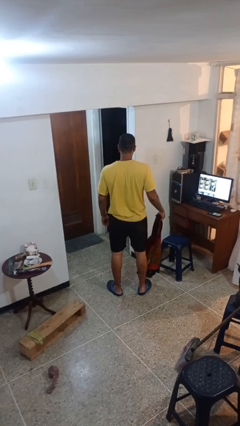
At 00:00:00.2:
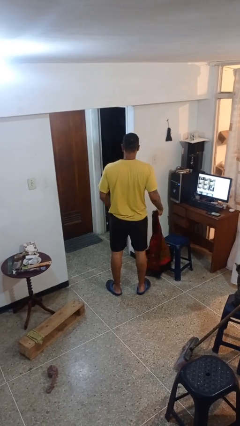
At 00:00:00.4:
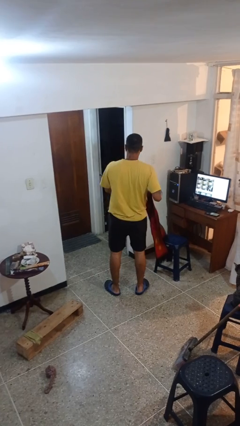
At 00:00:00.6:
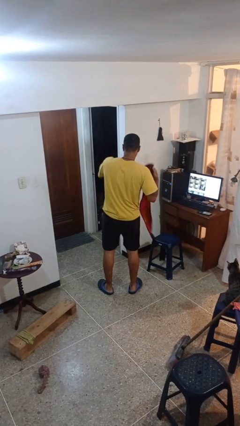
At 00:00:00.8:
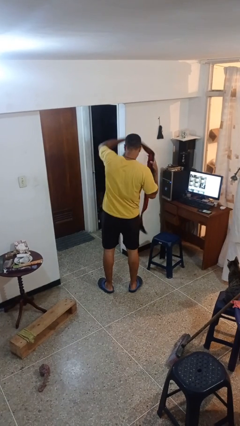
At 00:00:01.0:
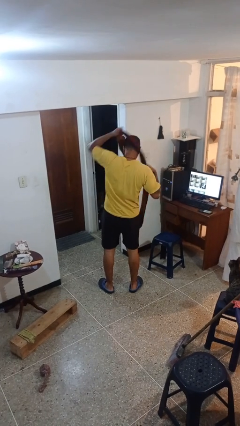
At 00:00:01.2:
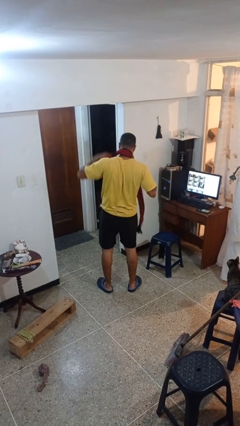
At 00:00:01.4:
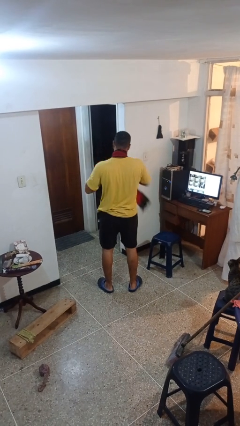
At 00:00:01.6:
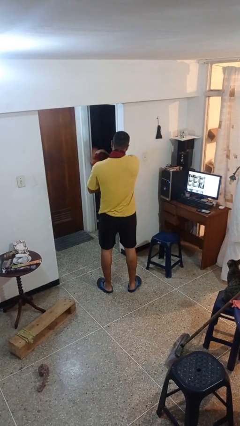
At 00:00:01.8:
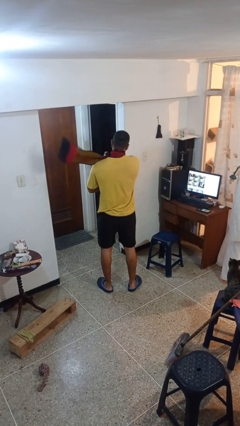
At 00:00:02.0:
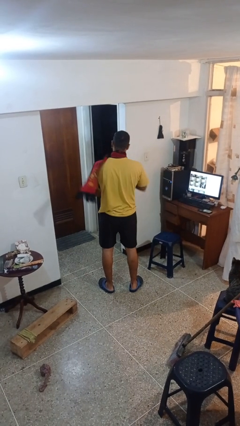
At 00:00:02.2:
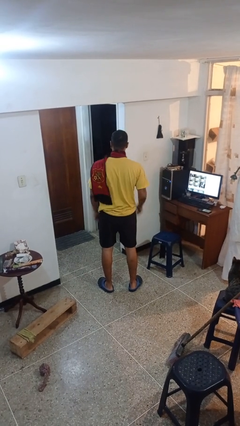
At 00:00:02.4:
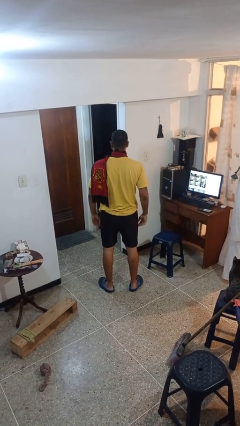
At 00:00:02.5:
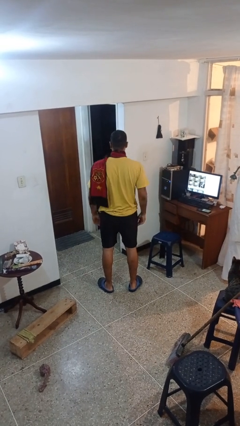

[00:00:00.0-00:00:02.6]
person puts on scarf

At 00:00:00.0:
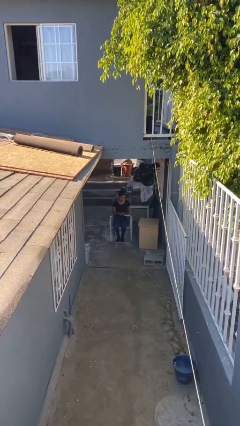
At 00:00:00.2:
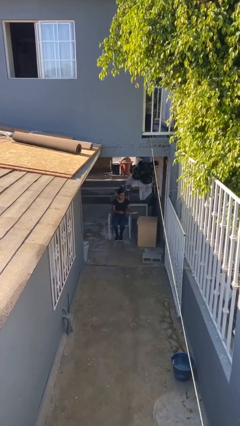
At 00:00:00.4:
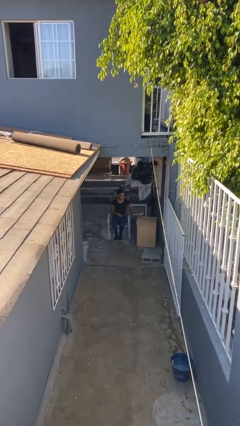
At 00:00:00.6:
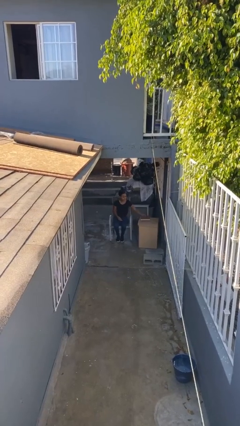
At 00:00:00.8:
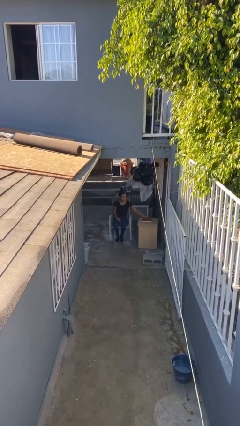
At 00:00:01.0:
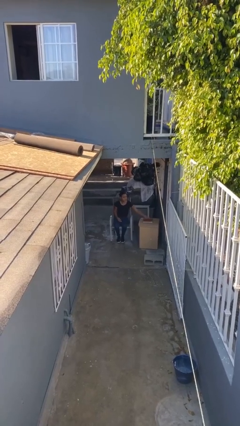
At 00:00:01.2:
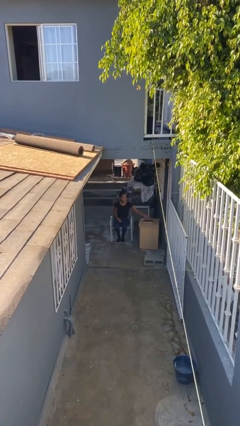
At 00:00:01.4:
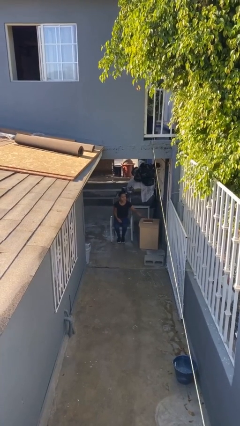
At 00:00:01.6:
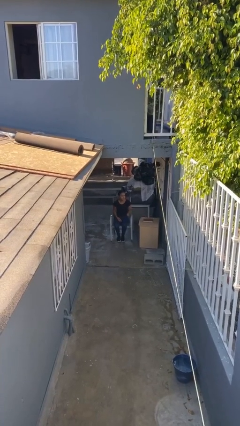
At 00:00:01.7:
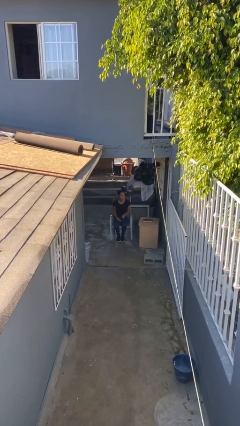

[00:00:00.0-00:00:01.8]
person puts down object on table

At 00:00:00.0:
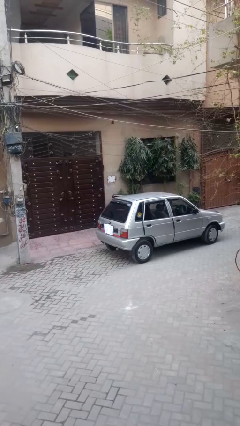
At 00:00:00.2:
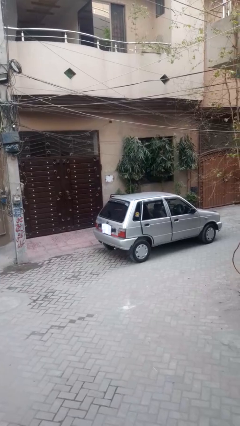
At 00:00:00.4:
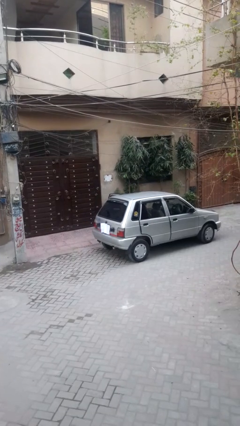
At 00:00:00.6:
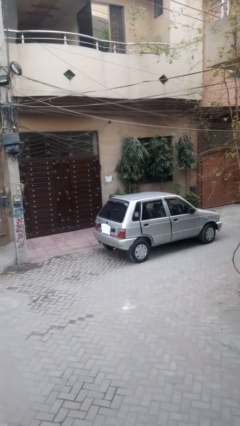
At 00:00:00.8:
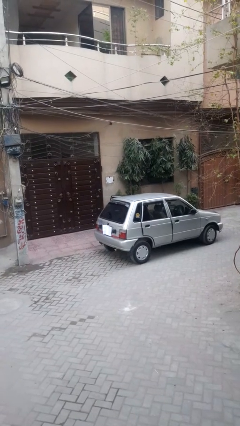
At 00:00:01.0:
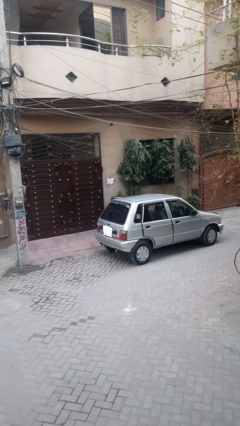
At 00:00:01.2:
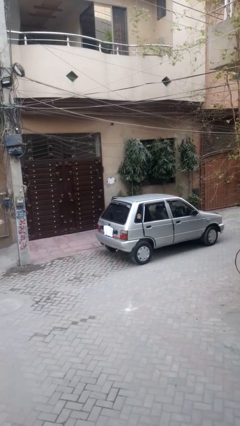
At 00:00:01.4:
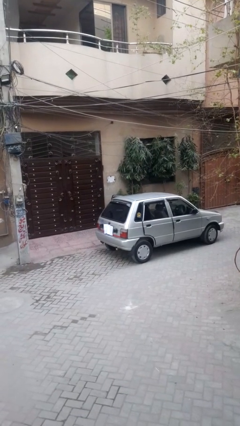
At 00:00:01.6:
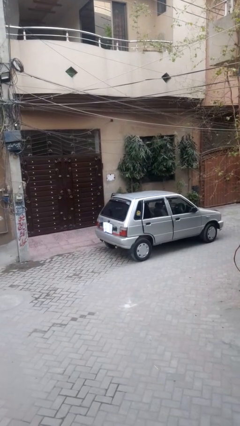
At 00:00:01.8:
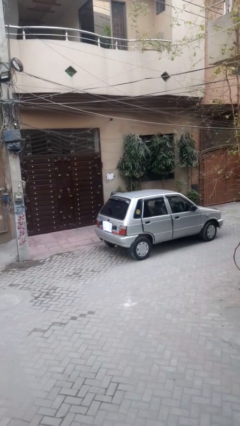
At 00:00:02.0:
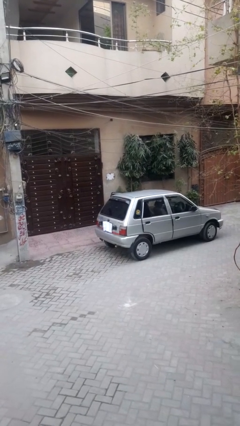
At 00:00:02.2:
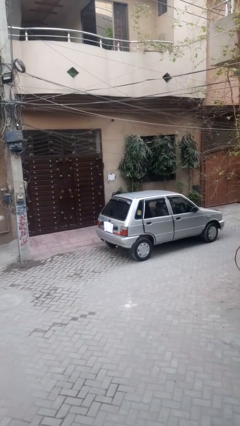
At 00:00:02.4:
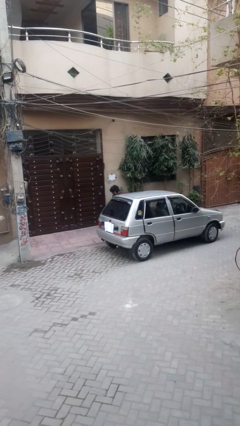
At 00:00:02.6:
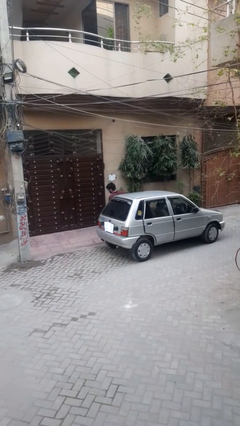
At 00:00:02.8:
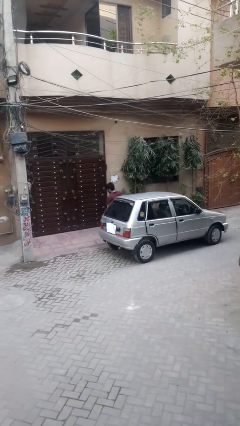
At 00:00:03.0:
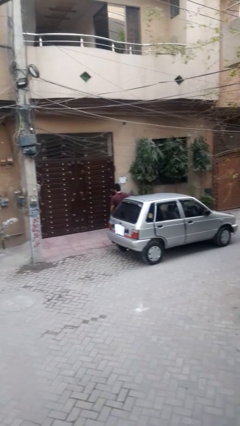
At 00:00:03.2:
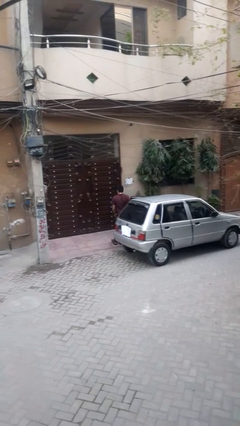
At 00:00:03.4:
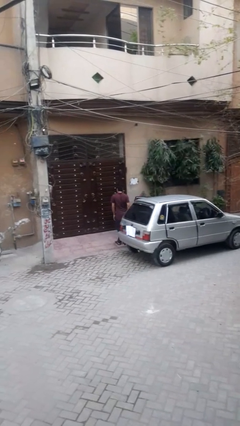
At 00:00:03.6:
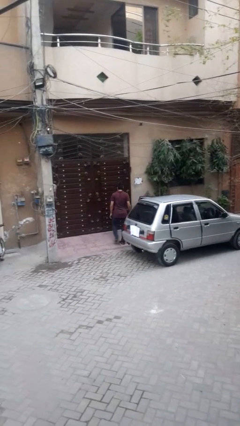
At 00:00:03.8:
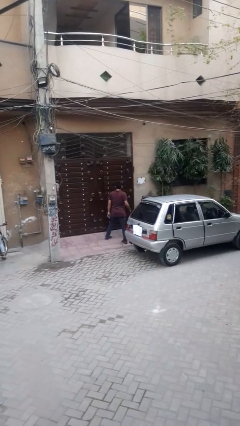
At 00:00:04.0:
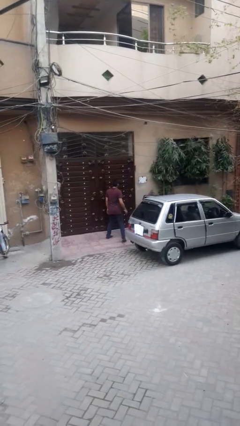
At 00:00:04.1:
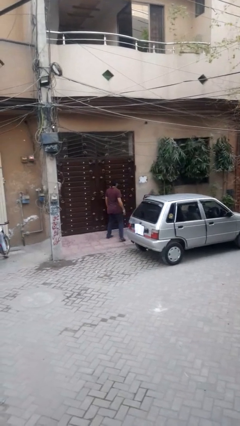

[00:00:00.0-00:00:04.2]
person exits car

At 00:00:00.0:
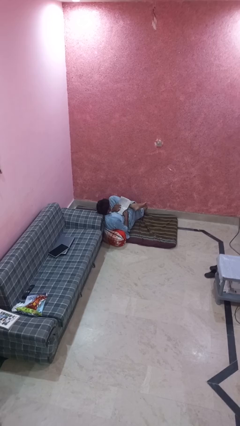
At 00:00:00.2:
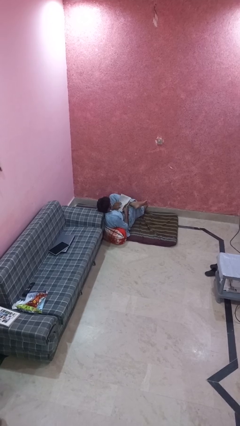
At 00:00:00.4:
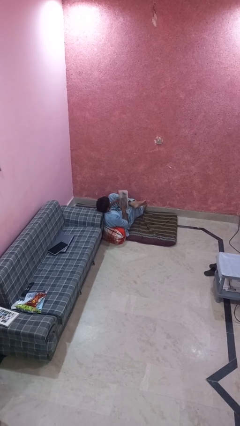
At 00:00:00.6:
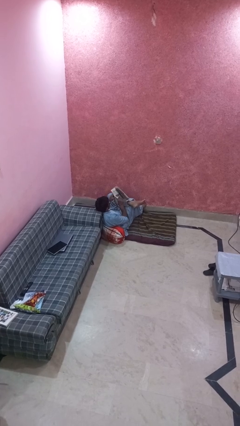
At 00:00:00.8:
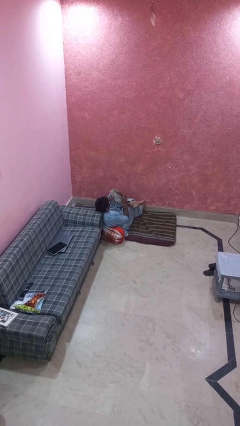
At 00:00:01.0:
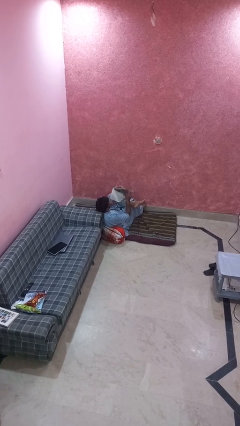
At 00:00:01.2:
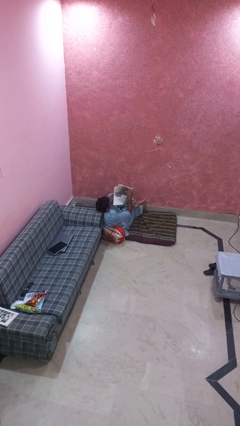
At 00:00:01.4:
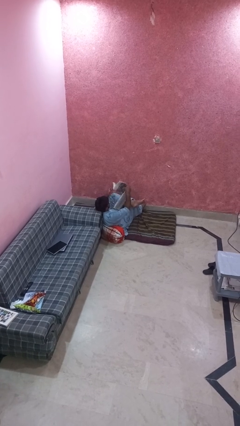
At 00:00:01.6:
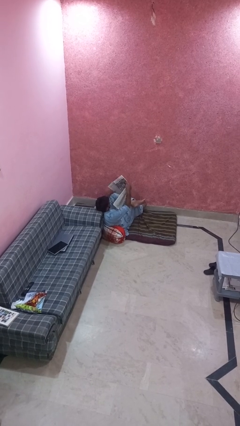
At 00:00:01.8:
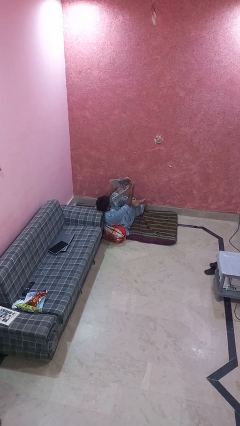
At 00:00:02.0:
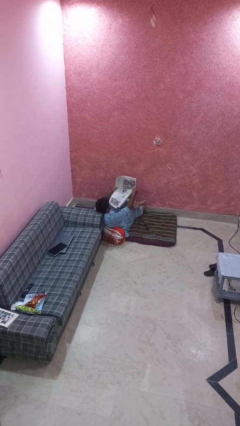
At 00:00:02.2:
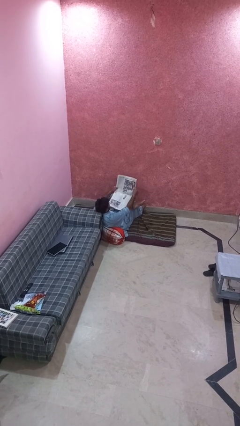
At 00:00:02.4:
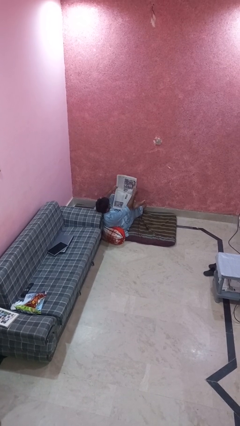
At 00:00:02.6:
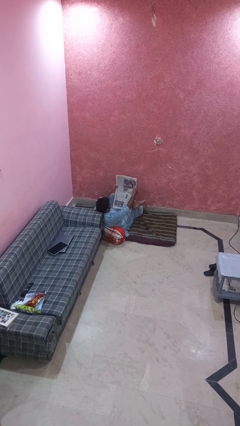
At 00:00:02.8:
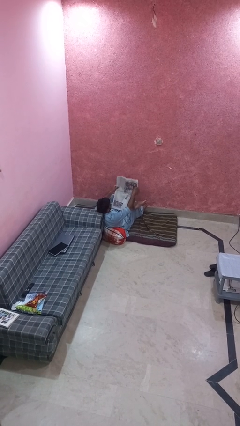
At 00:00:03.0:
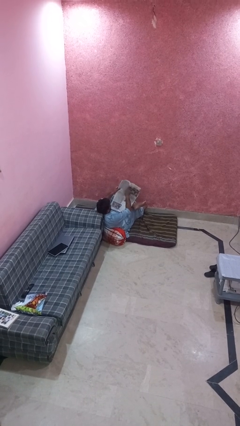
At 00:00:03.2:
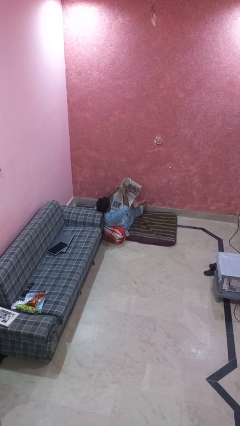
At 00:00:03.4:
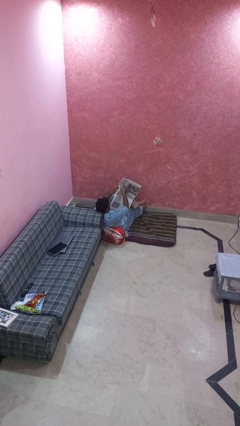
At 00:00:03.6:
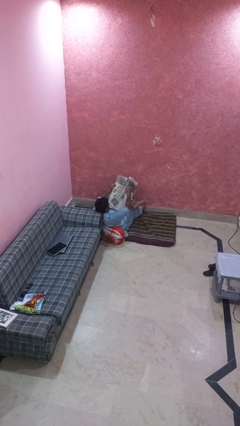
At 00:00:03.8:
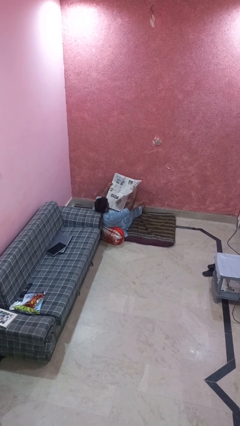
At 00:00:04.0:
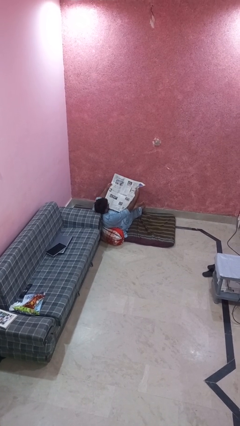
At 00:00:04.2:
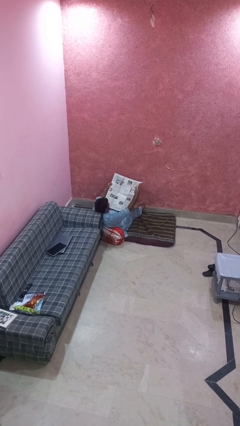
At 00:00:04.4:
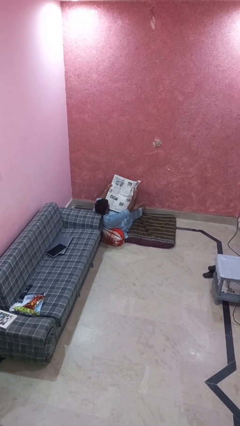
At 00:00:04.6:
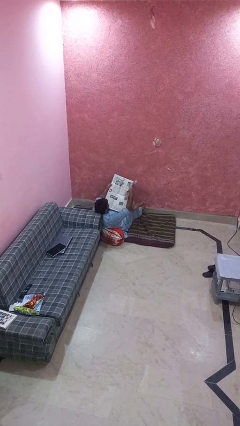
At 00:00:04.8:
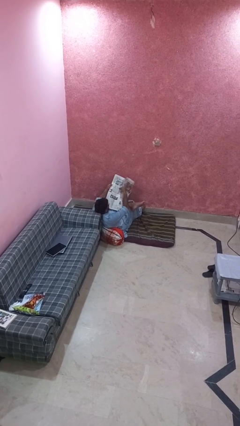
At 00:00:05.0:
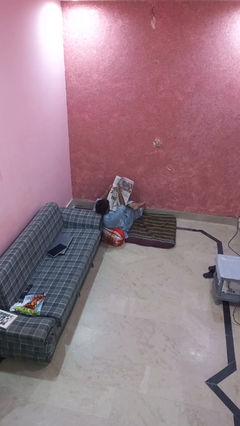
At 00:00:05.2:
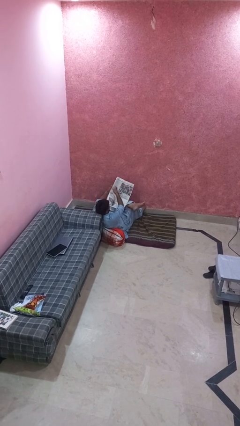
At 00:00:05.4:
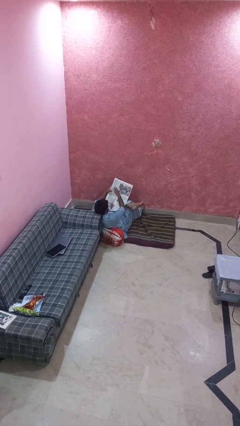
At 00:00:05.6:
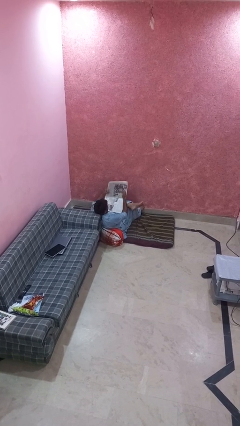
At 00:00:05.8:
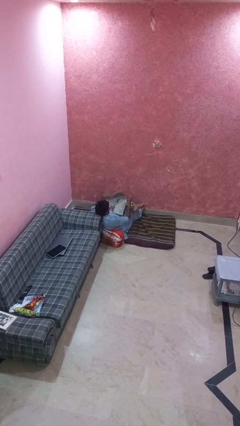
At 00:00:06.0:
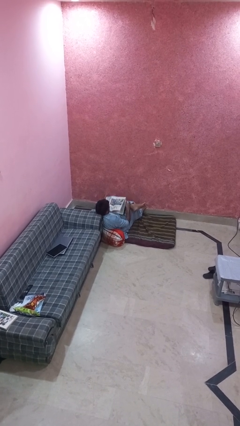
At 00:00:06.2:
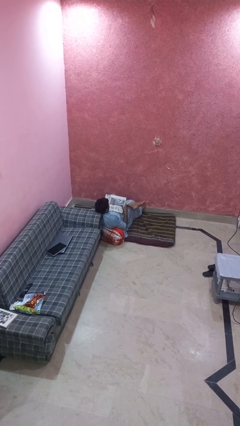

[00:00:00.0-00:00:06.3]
person reads newspaper

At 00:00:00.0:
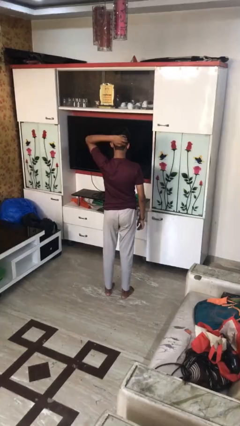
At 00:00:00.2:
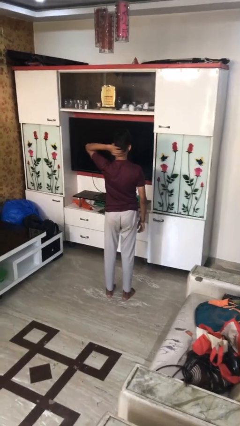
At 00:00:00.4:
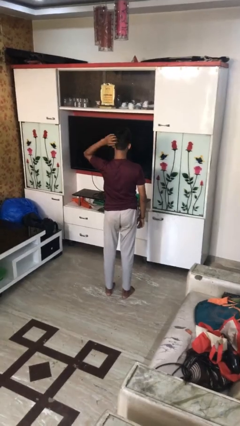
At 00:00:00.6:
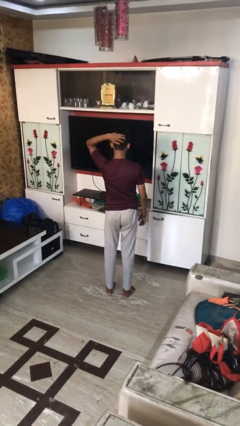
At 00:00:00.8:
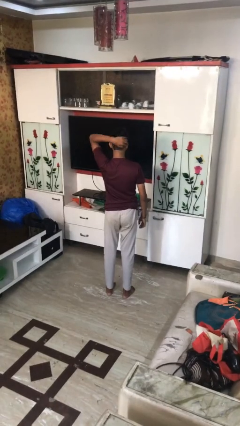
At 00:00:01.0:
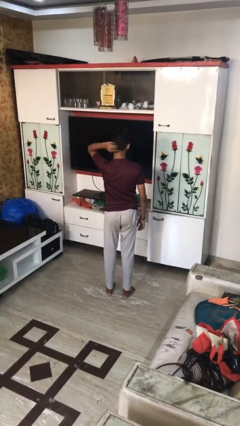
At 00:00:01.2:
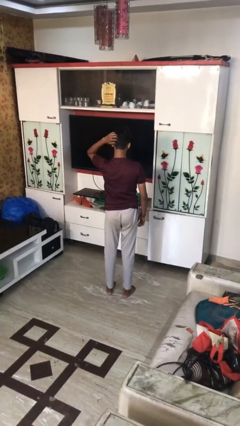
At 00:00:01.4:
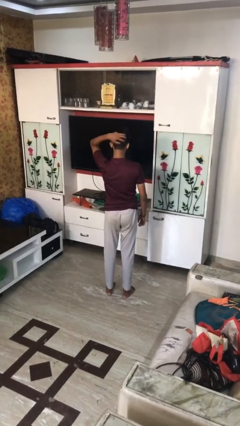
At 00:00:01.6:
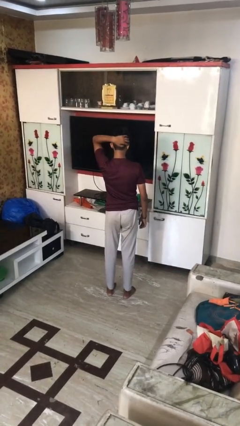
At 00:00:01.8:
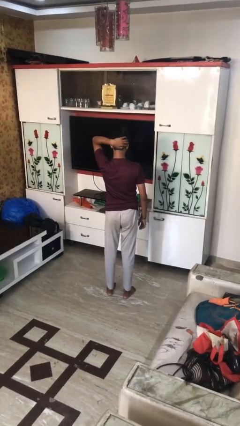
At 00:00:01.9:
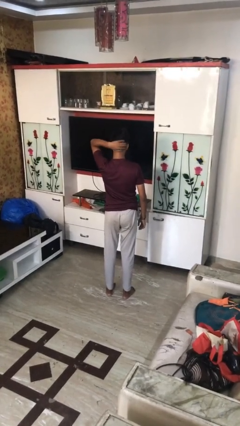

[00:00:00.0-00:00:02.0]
person strokes hair

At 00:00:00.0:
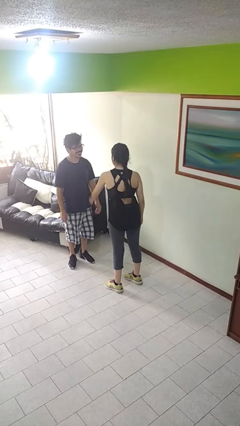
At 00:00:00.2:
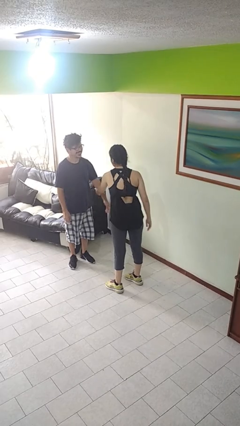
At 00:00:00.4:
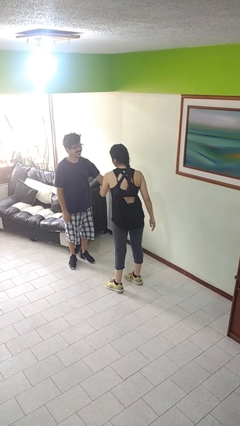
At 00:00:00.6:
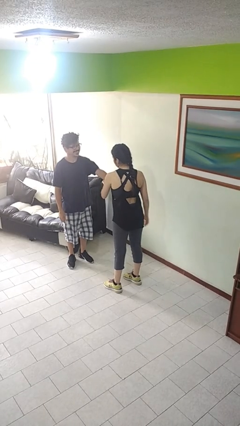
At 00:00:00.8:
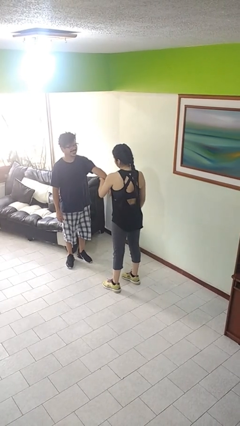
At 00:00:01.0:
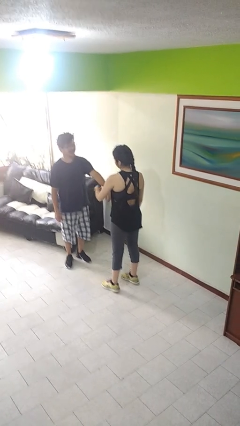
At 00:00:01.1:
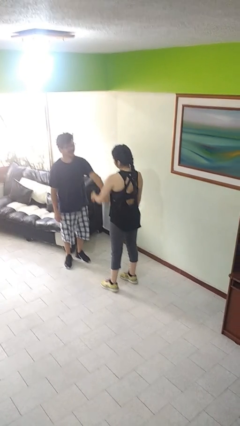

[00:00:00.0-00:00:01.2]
person grabs person by forearm
